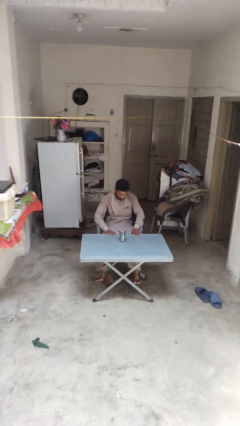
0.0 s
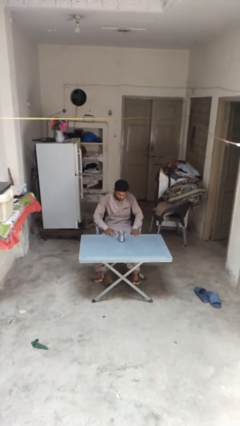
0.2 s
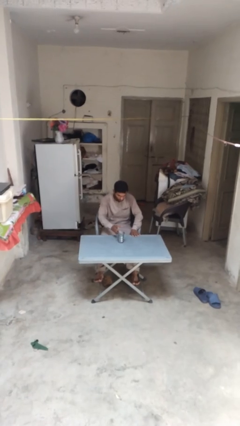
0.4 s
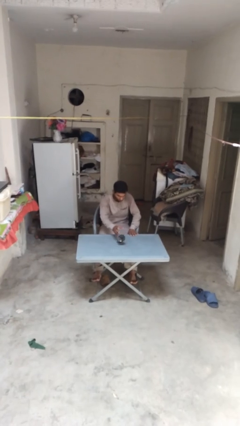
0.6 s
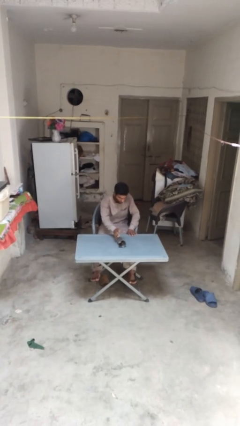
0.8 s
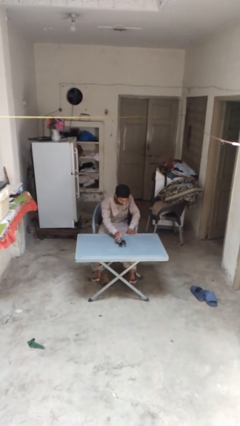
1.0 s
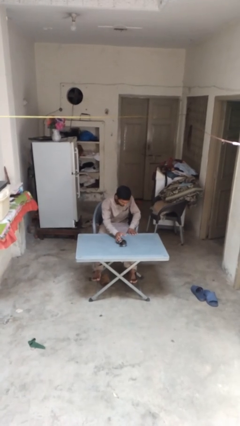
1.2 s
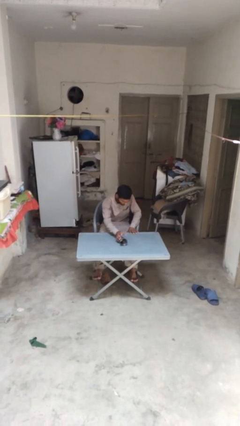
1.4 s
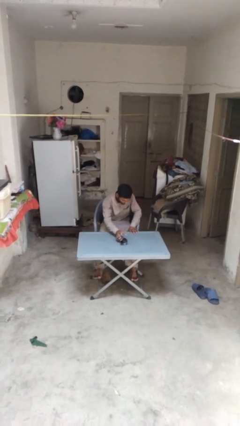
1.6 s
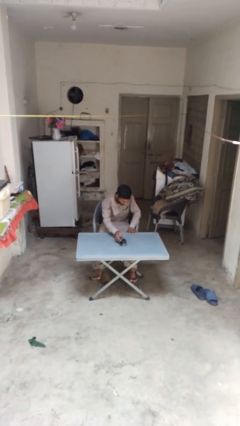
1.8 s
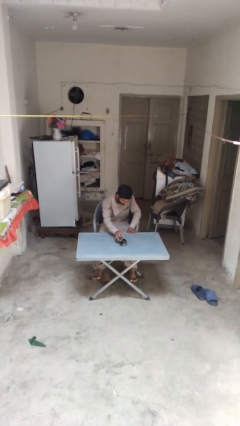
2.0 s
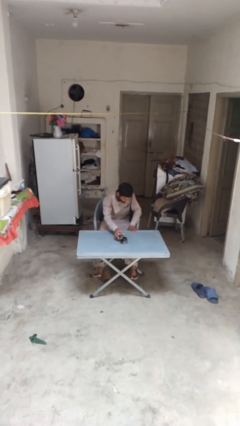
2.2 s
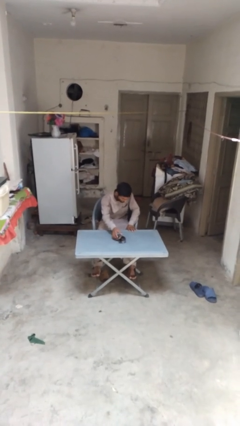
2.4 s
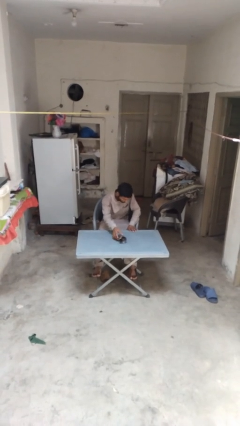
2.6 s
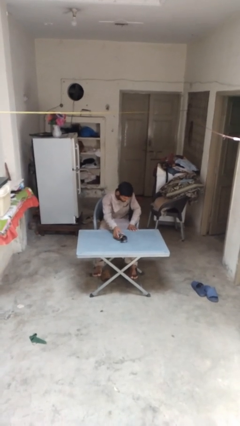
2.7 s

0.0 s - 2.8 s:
person knocks over glass

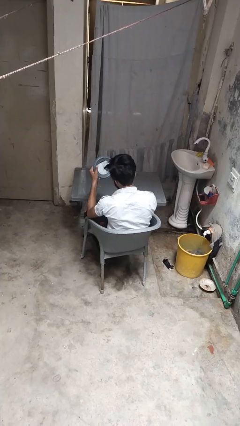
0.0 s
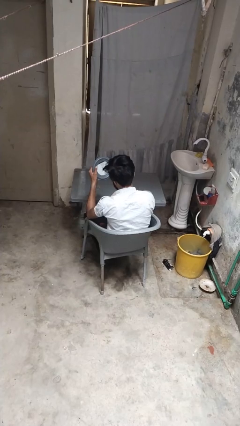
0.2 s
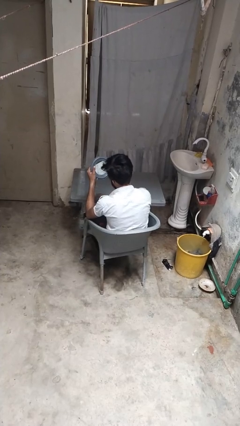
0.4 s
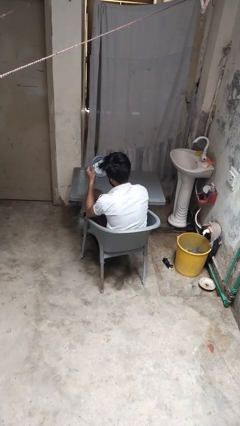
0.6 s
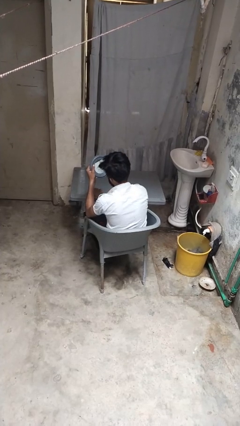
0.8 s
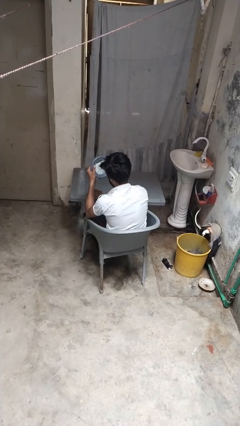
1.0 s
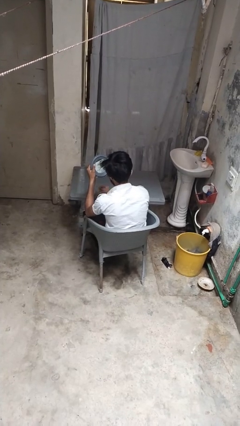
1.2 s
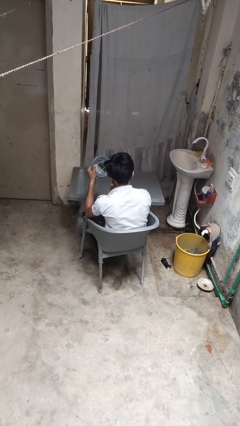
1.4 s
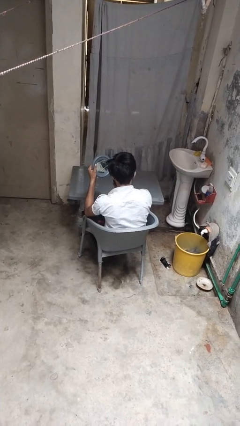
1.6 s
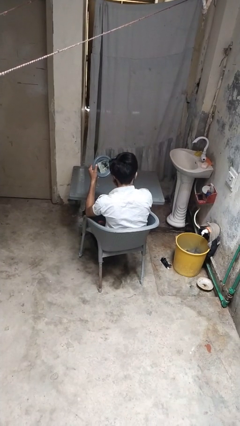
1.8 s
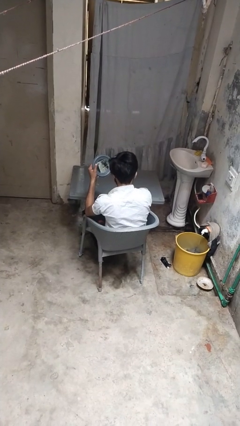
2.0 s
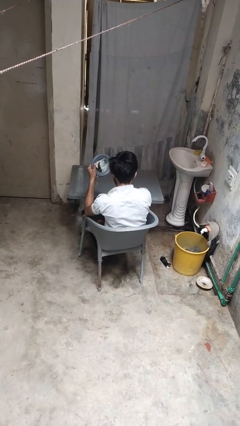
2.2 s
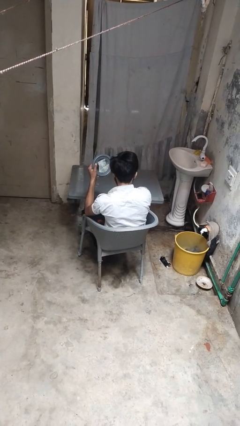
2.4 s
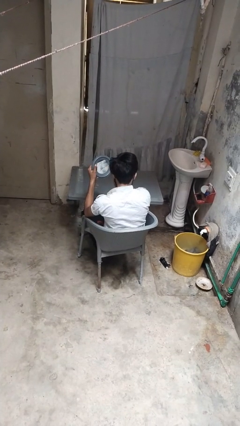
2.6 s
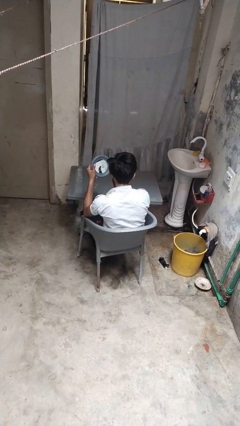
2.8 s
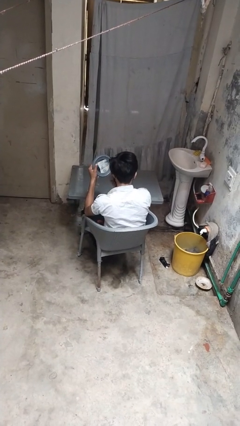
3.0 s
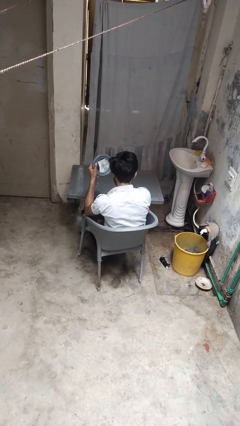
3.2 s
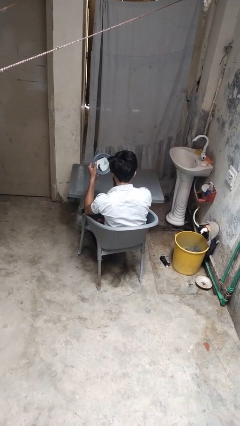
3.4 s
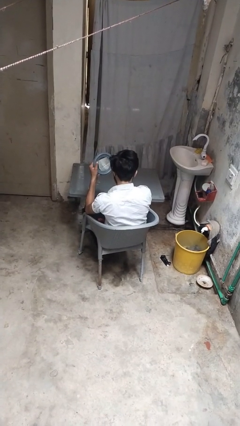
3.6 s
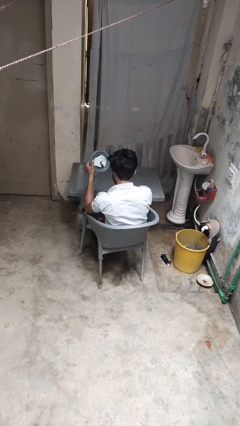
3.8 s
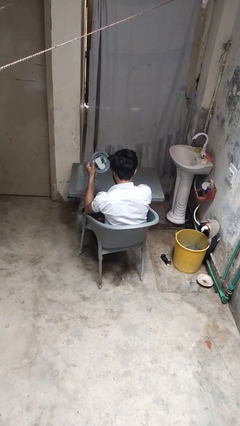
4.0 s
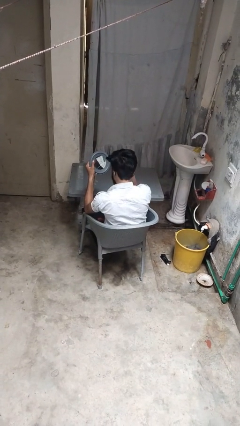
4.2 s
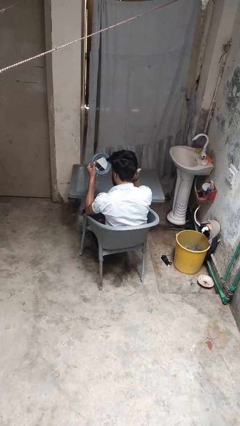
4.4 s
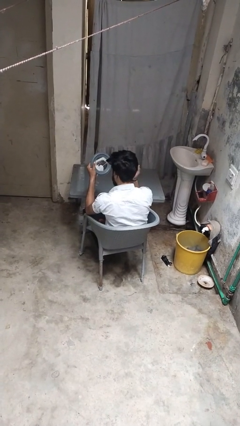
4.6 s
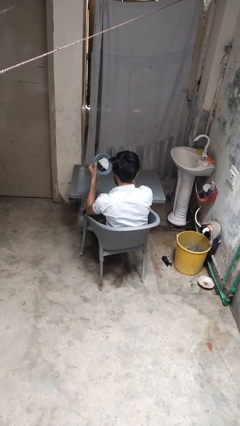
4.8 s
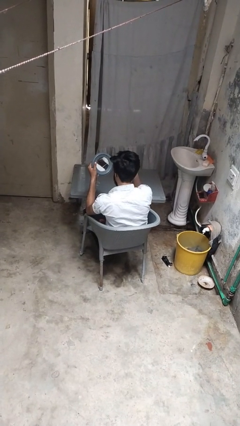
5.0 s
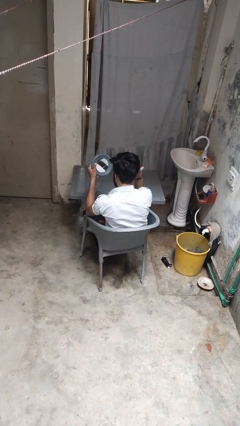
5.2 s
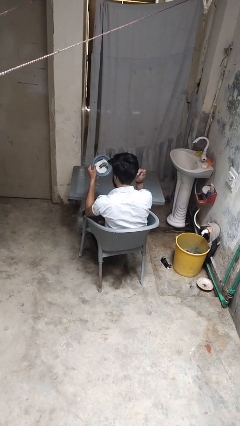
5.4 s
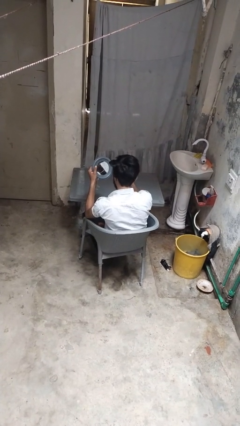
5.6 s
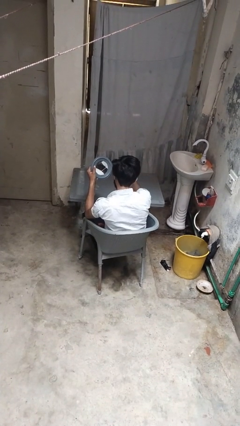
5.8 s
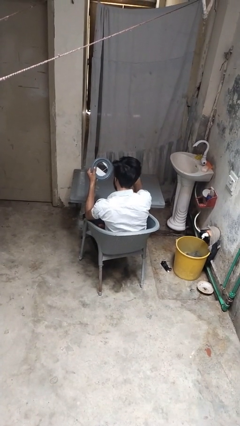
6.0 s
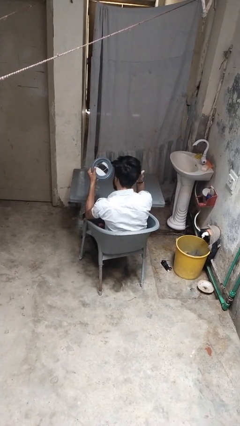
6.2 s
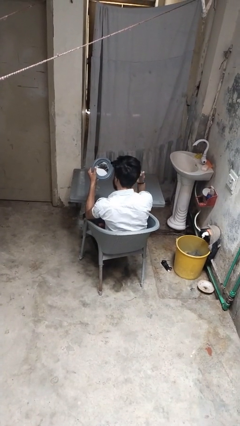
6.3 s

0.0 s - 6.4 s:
person applies foundation makeup

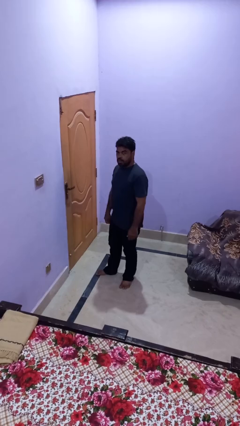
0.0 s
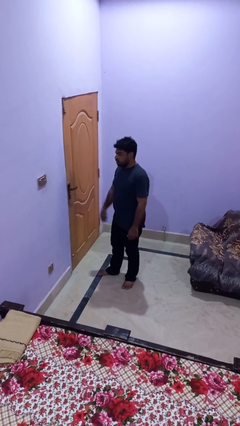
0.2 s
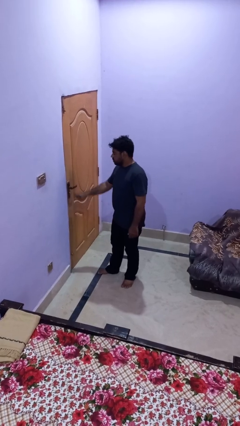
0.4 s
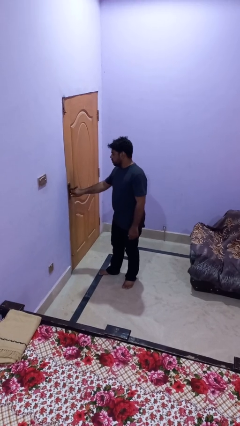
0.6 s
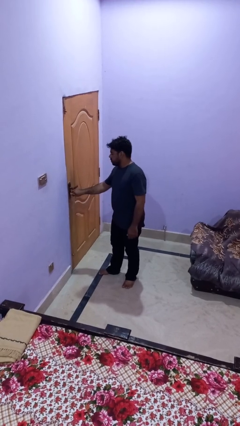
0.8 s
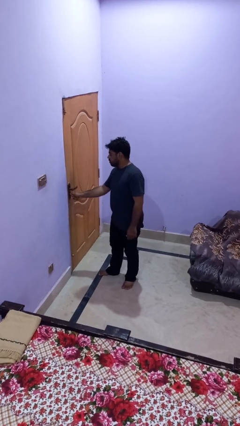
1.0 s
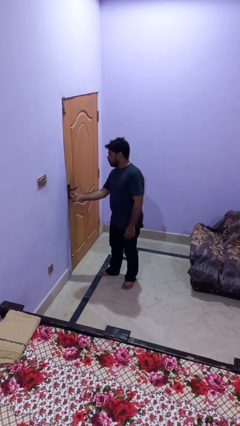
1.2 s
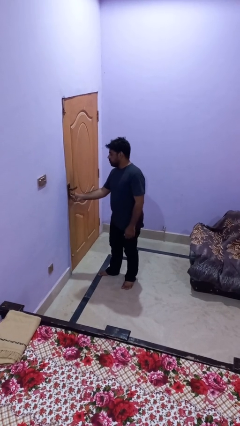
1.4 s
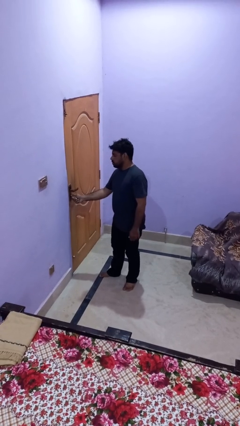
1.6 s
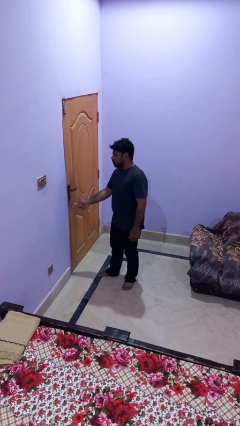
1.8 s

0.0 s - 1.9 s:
person unlocks door with keys

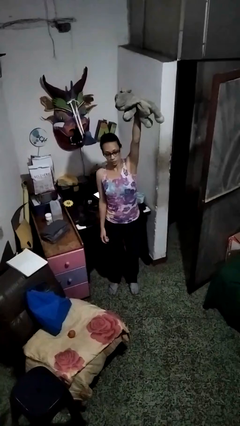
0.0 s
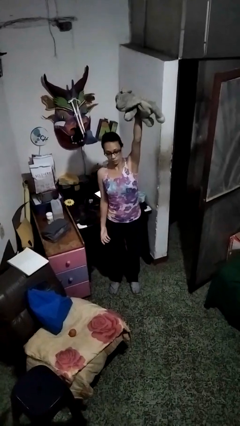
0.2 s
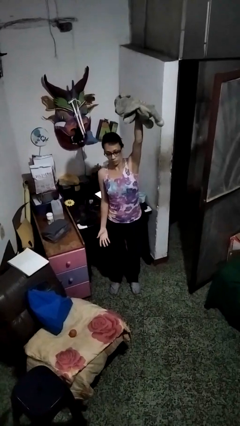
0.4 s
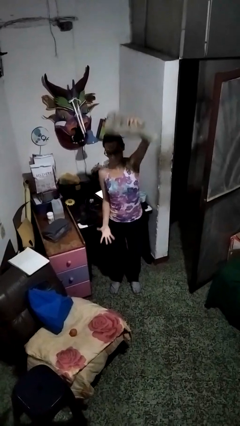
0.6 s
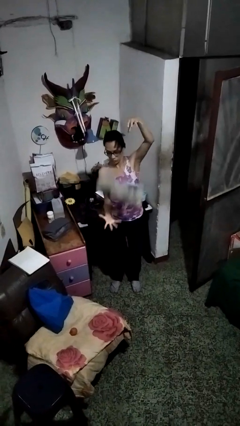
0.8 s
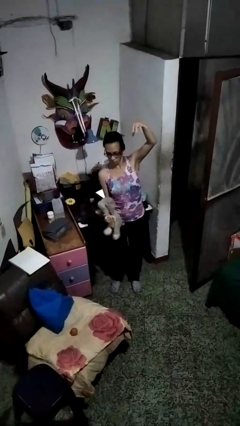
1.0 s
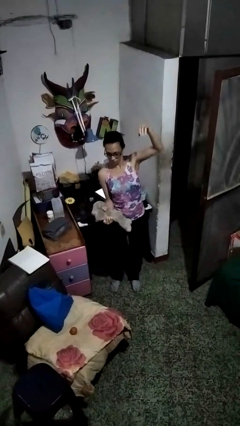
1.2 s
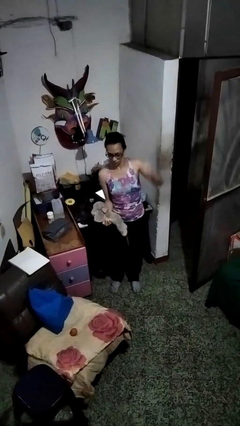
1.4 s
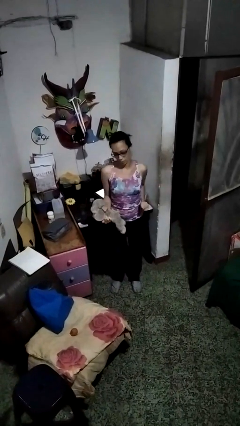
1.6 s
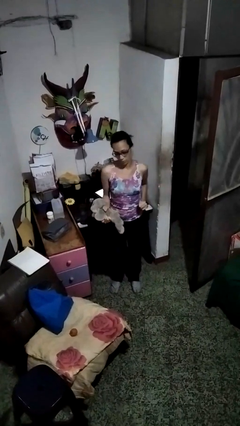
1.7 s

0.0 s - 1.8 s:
person catches dropped object

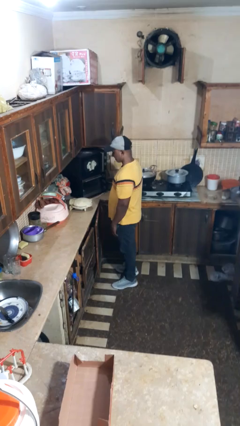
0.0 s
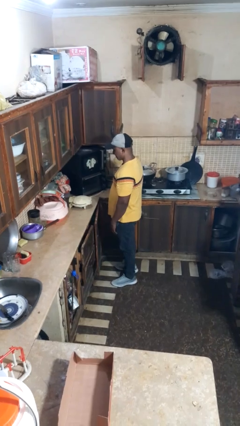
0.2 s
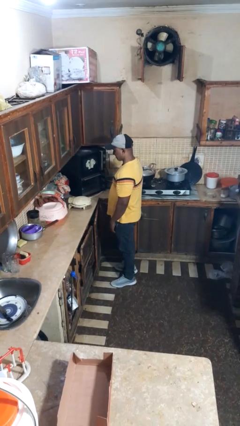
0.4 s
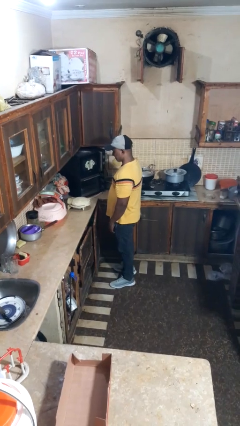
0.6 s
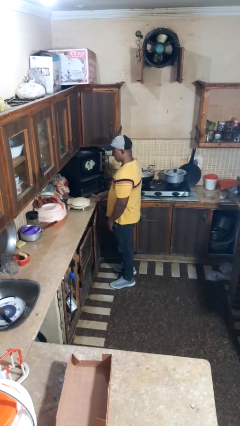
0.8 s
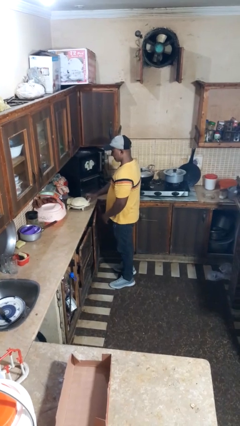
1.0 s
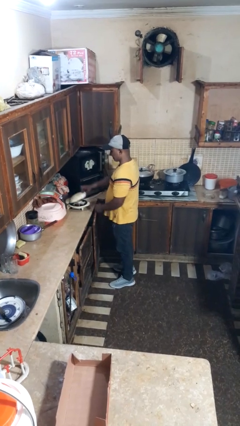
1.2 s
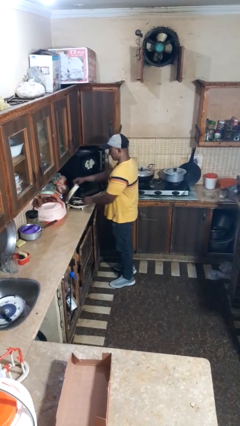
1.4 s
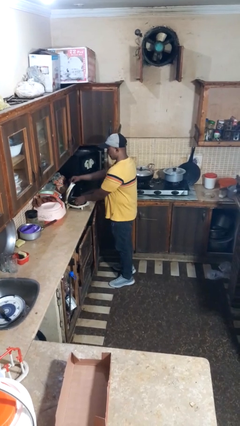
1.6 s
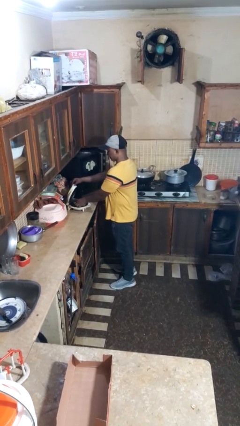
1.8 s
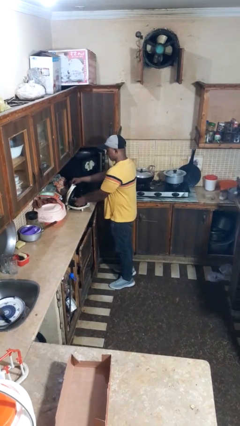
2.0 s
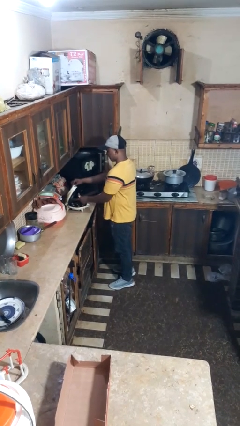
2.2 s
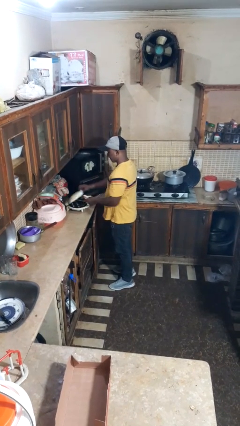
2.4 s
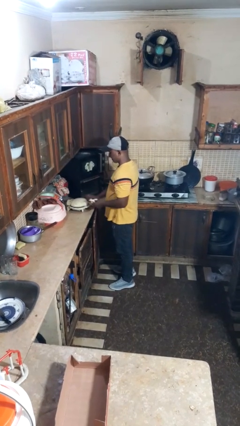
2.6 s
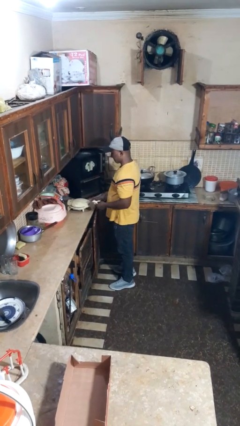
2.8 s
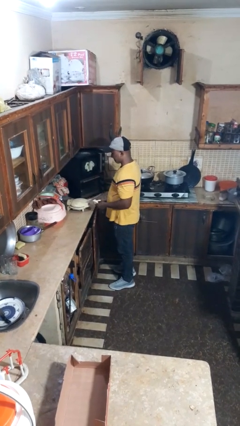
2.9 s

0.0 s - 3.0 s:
person takes object from toaster

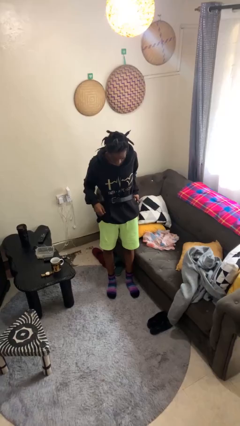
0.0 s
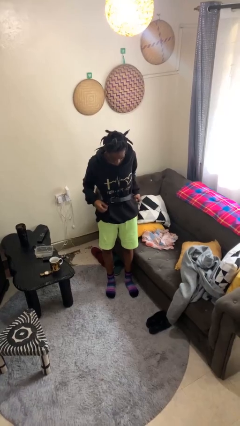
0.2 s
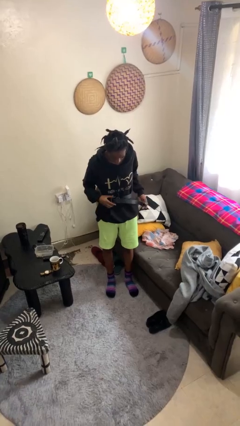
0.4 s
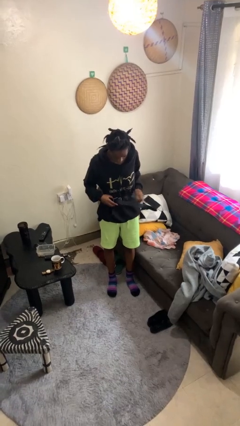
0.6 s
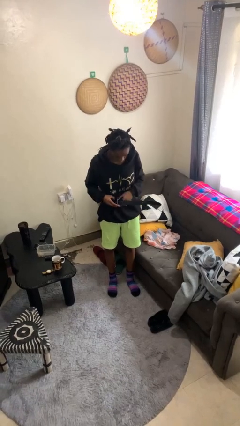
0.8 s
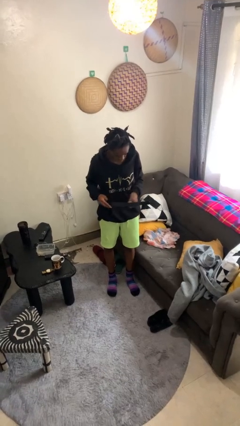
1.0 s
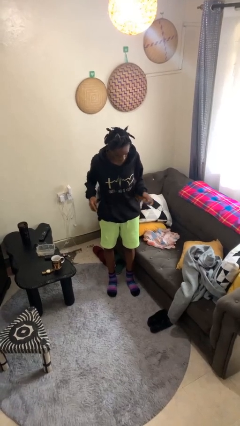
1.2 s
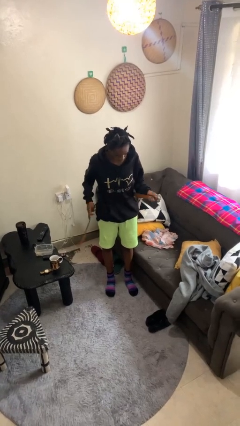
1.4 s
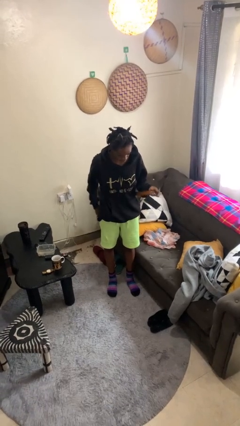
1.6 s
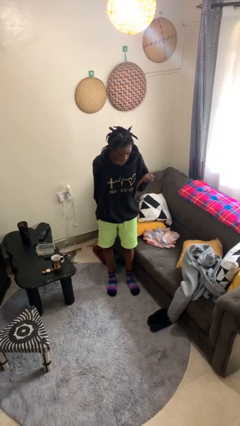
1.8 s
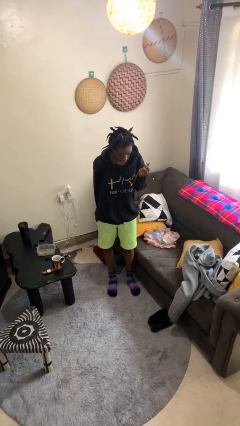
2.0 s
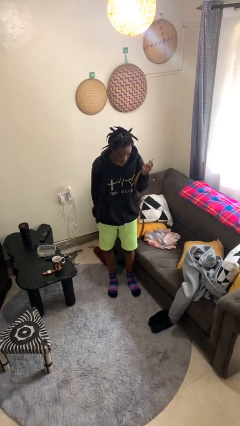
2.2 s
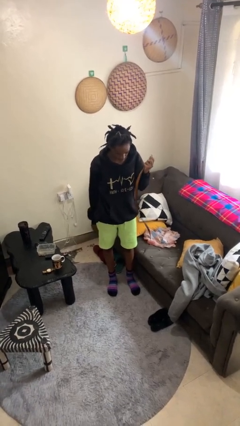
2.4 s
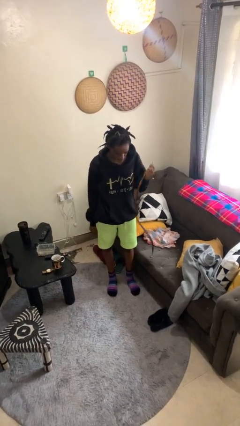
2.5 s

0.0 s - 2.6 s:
person takes off belt
